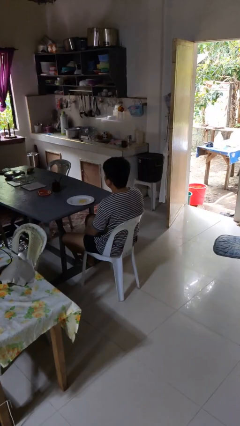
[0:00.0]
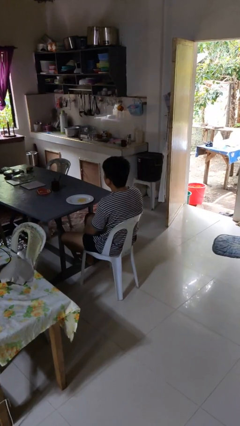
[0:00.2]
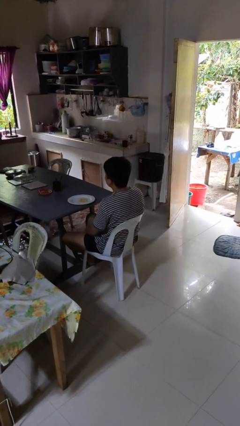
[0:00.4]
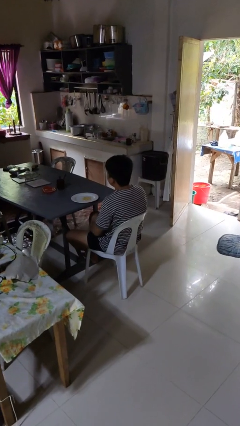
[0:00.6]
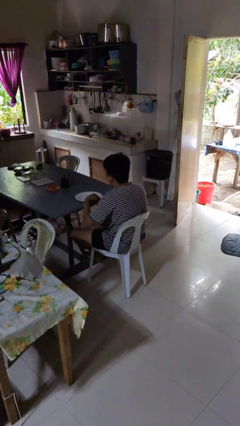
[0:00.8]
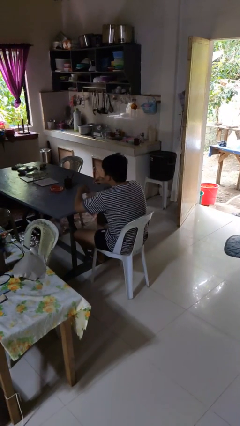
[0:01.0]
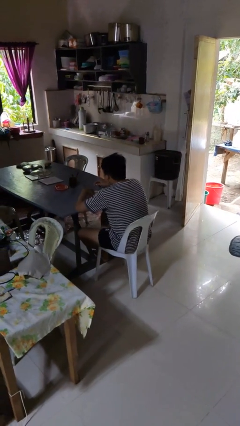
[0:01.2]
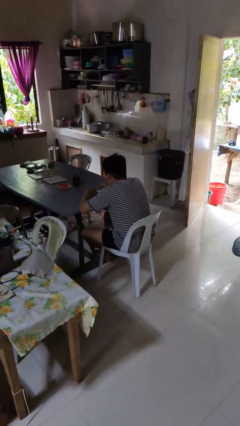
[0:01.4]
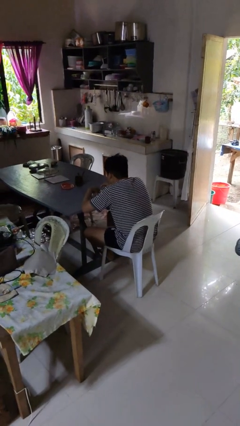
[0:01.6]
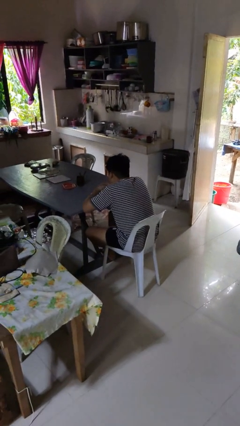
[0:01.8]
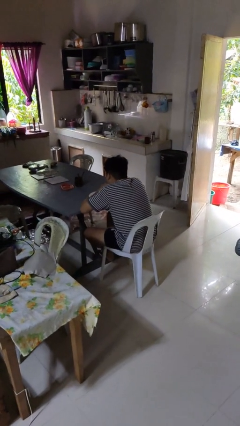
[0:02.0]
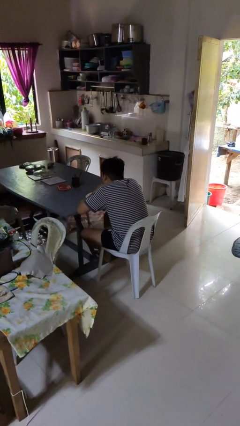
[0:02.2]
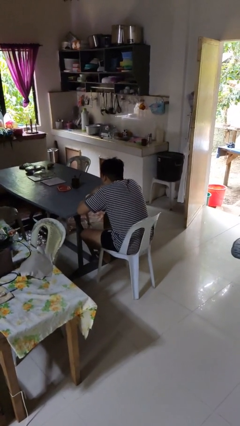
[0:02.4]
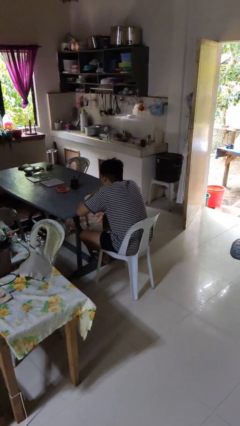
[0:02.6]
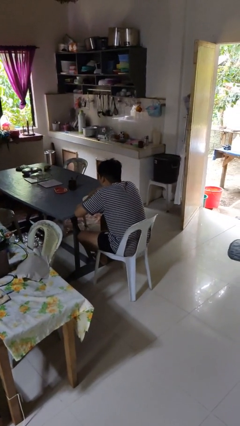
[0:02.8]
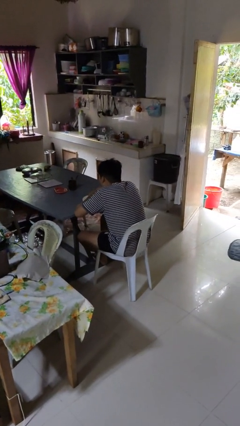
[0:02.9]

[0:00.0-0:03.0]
person eats with hands

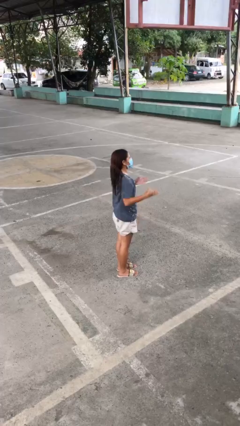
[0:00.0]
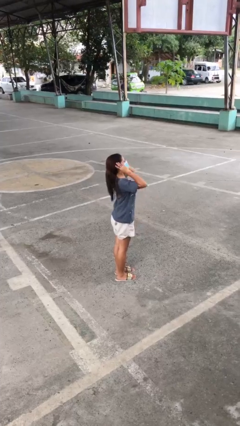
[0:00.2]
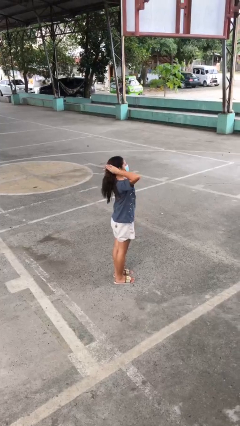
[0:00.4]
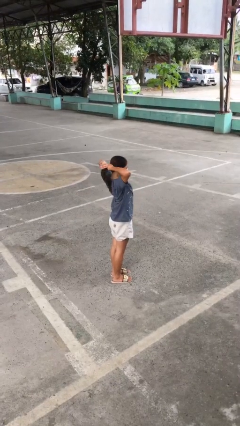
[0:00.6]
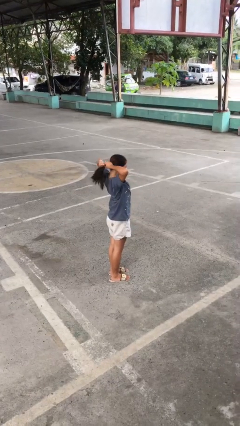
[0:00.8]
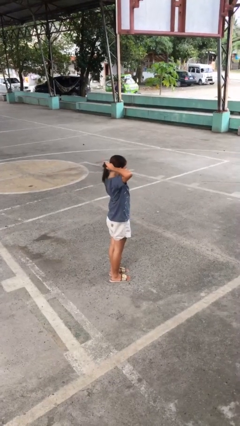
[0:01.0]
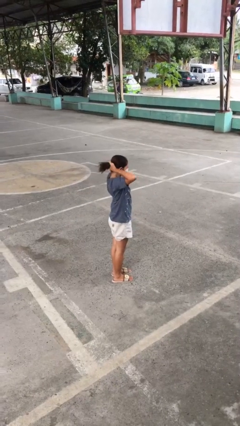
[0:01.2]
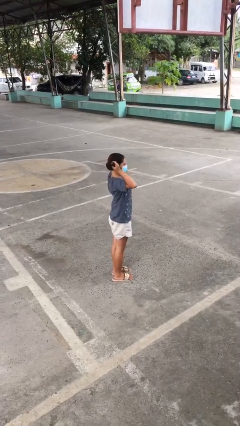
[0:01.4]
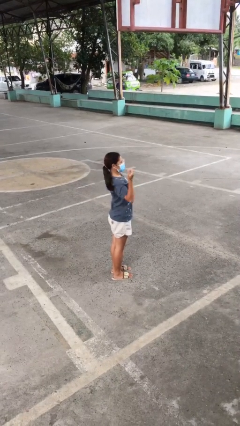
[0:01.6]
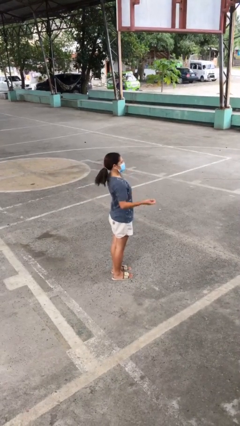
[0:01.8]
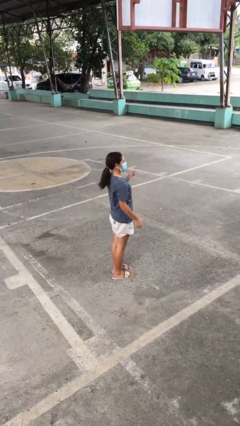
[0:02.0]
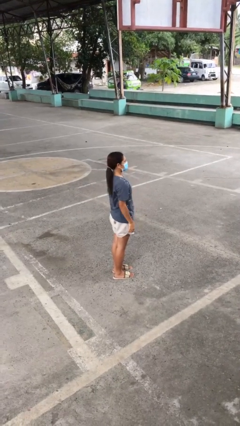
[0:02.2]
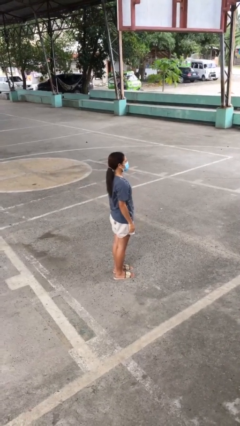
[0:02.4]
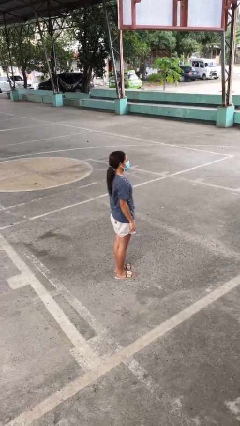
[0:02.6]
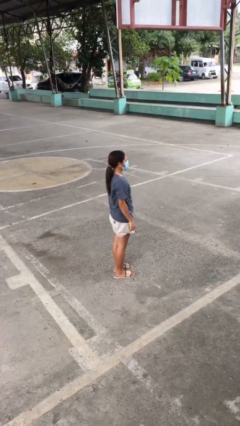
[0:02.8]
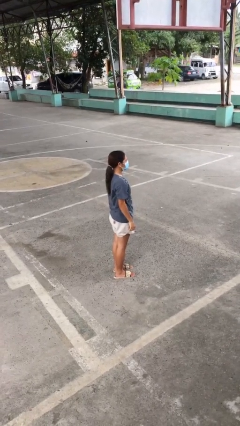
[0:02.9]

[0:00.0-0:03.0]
person puts hair in ponytail

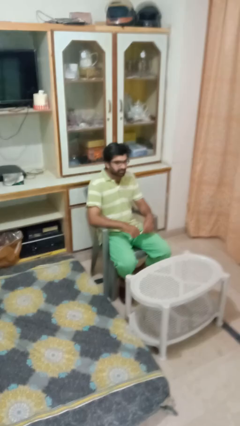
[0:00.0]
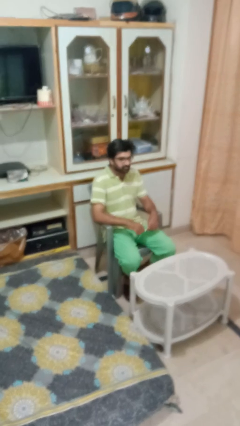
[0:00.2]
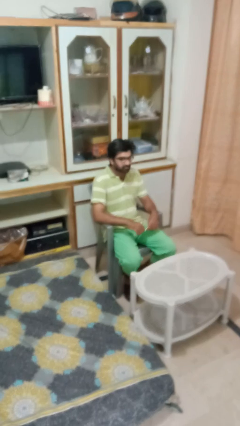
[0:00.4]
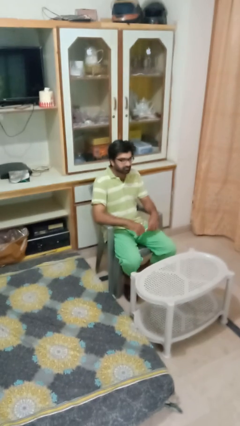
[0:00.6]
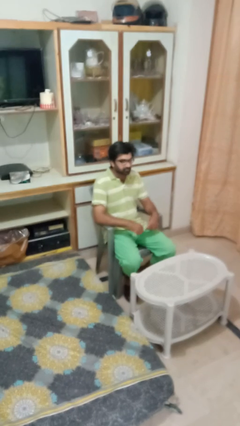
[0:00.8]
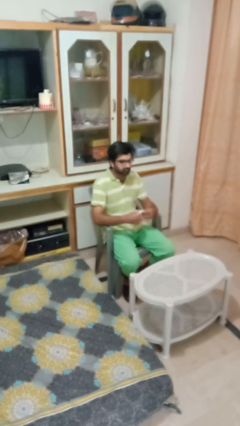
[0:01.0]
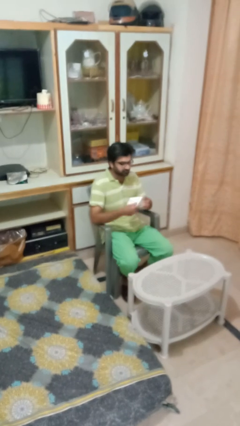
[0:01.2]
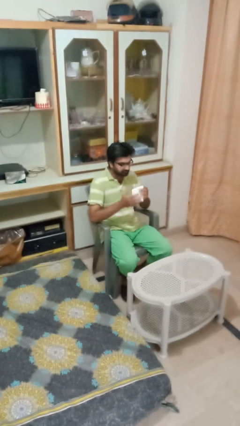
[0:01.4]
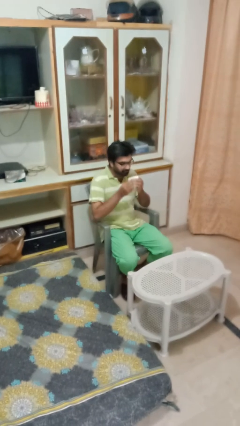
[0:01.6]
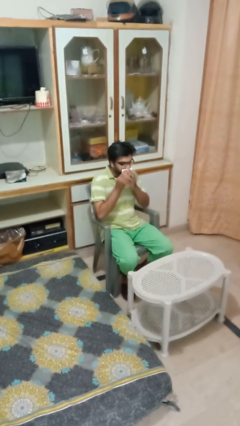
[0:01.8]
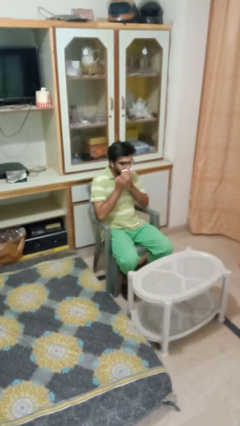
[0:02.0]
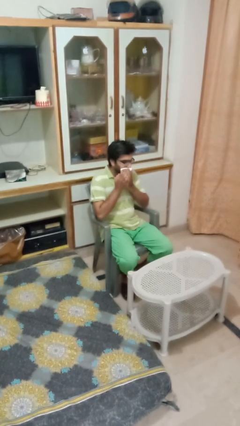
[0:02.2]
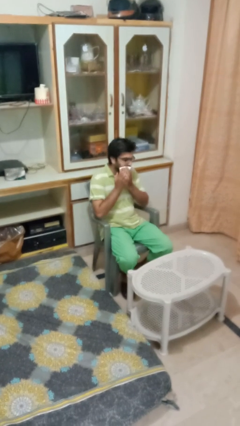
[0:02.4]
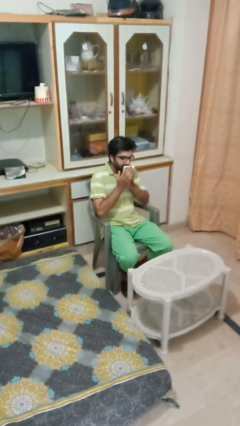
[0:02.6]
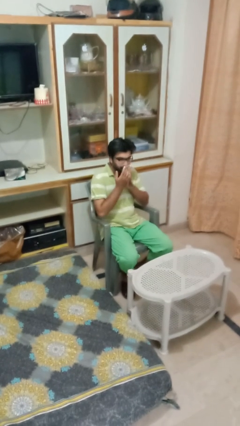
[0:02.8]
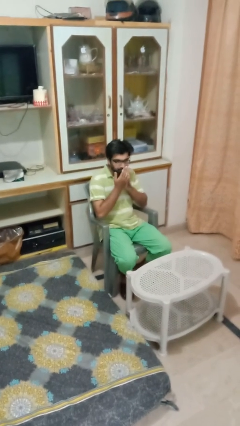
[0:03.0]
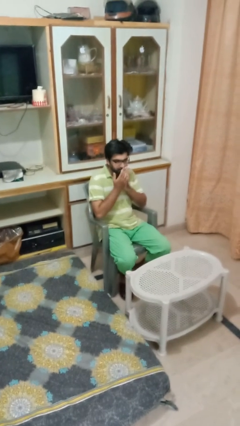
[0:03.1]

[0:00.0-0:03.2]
person wipes mouth with napkin

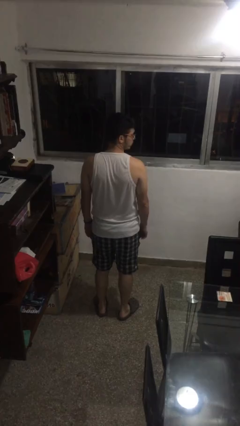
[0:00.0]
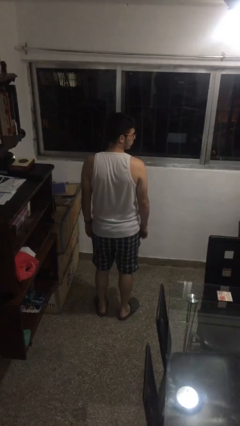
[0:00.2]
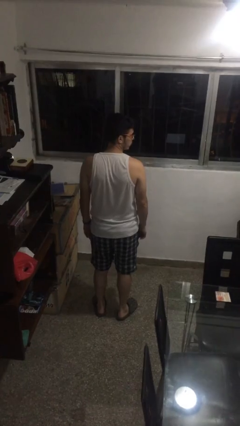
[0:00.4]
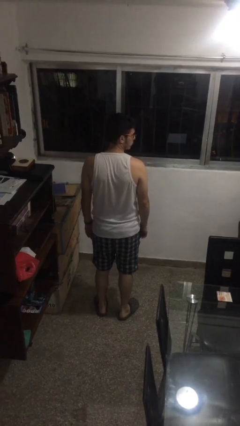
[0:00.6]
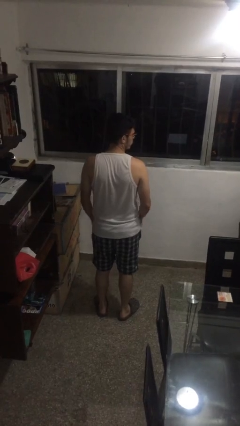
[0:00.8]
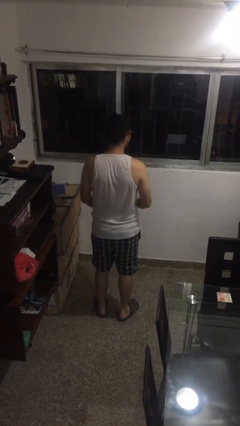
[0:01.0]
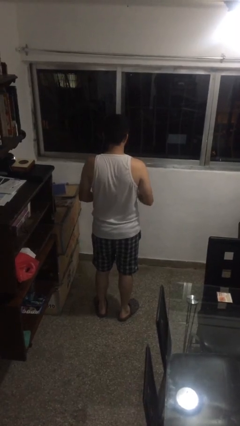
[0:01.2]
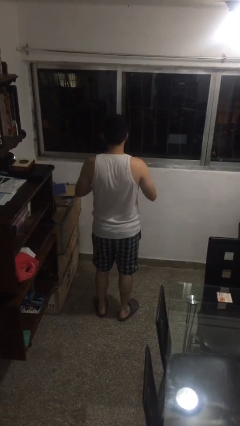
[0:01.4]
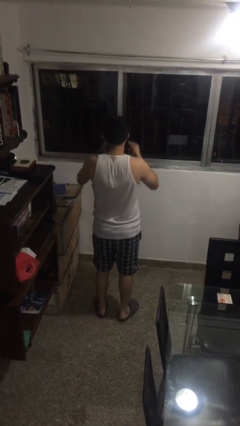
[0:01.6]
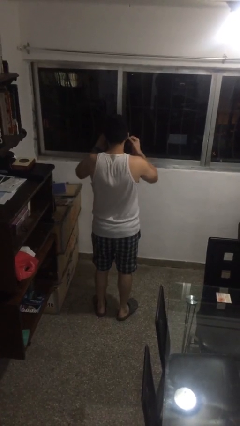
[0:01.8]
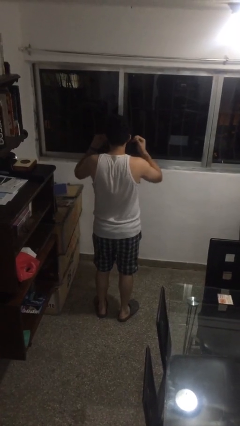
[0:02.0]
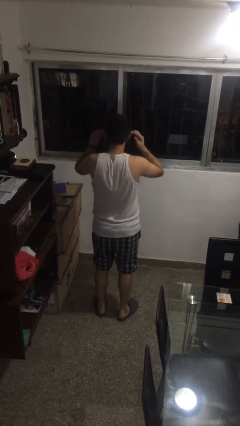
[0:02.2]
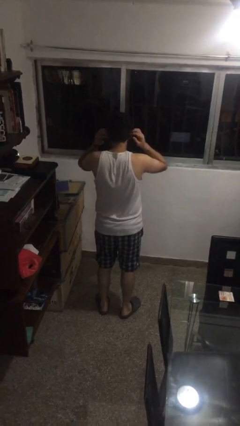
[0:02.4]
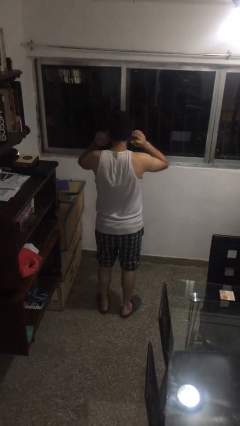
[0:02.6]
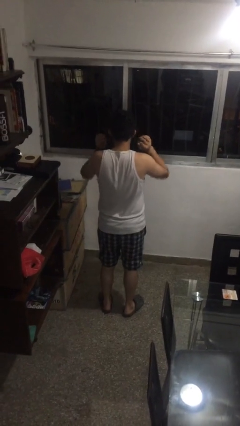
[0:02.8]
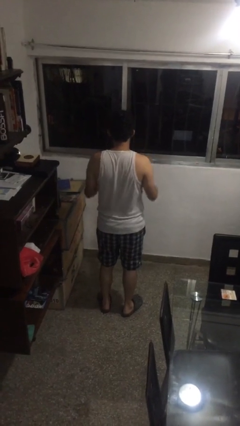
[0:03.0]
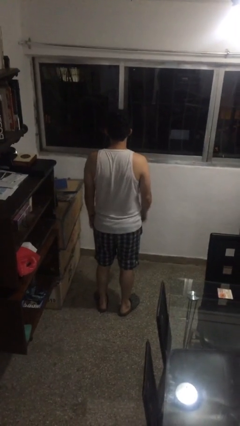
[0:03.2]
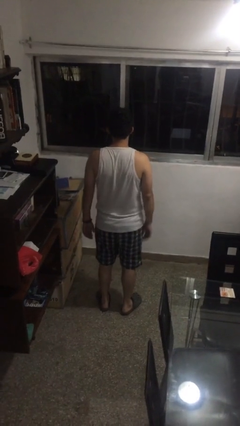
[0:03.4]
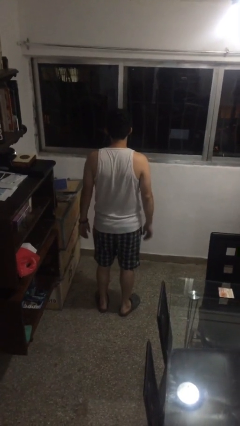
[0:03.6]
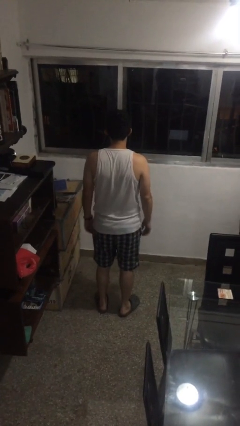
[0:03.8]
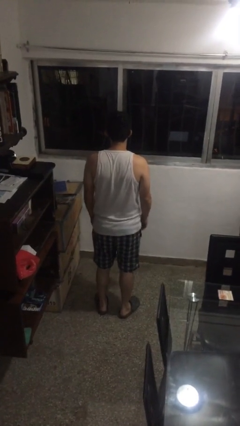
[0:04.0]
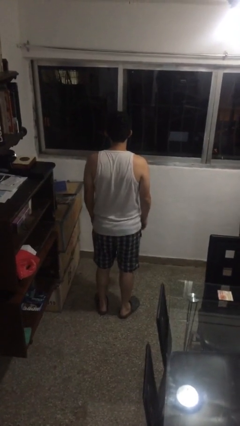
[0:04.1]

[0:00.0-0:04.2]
person puts on facemask

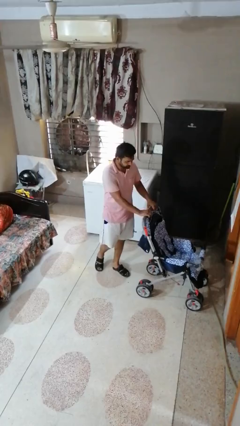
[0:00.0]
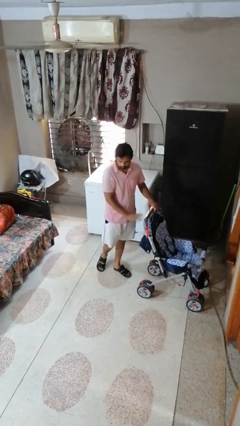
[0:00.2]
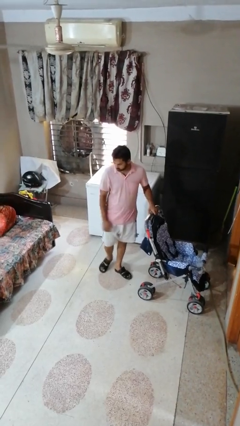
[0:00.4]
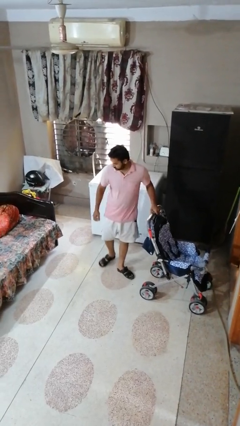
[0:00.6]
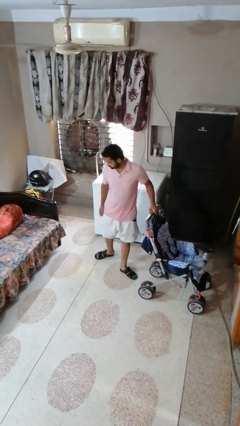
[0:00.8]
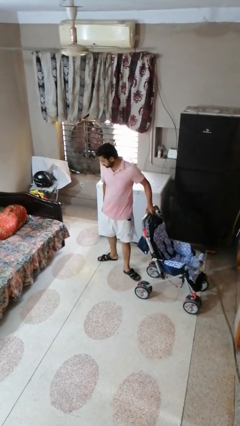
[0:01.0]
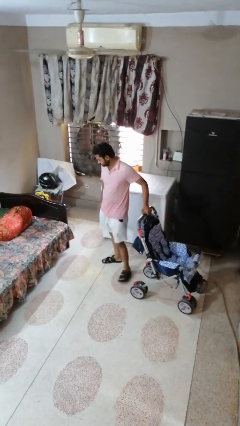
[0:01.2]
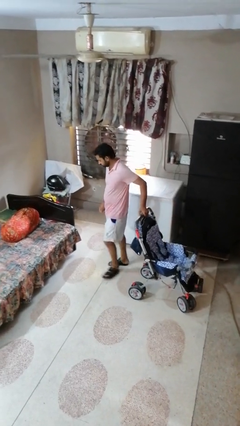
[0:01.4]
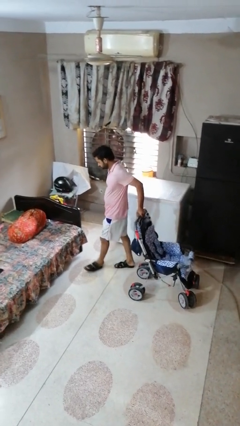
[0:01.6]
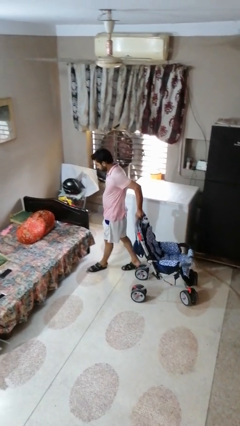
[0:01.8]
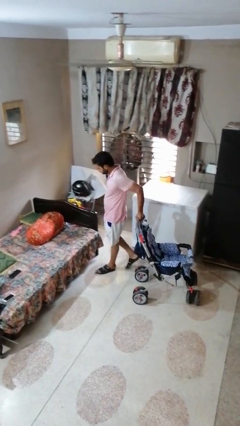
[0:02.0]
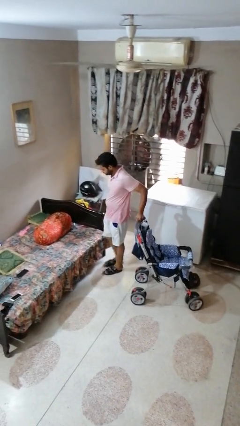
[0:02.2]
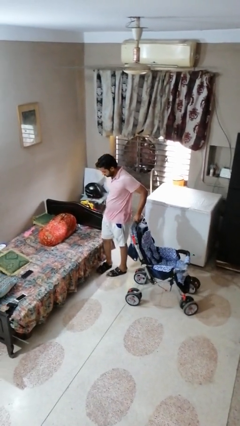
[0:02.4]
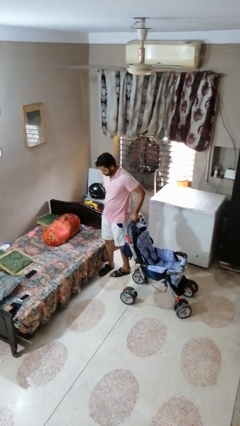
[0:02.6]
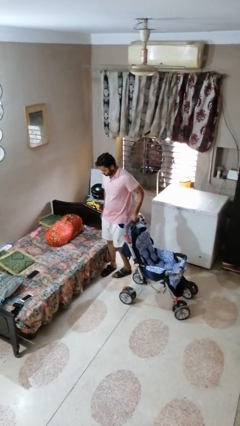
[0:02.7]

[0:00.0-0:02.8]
person pulls wheeled cart

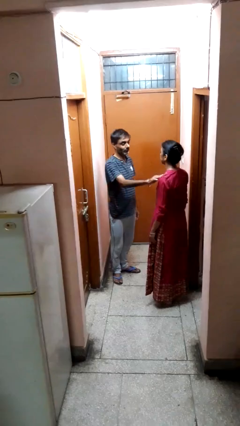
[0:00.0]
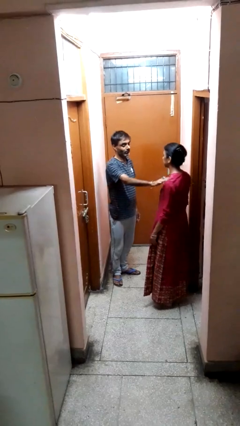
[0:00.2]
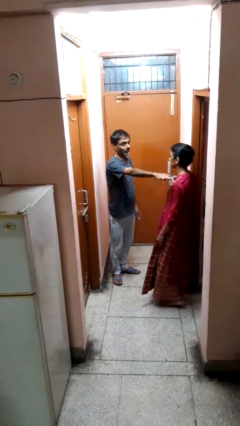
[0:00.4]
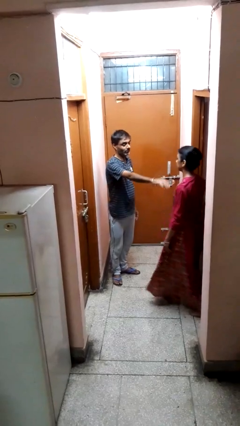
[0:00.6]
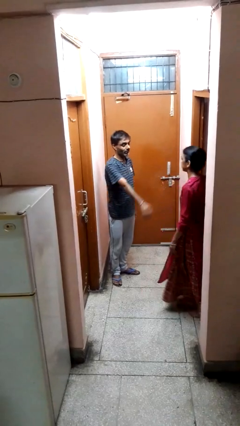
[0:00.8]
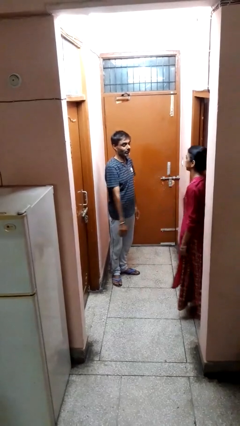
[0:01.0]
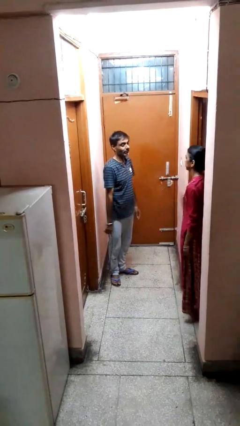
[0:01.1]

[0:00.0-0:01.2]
person shoves person
